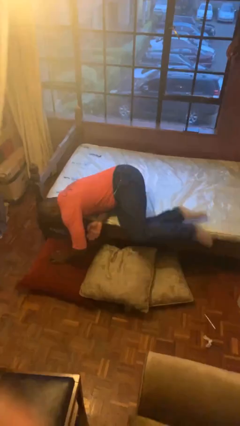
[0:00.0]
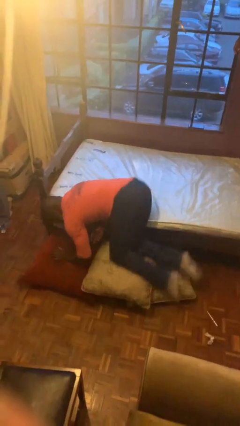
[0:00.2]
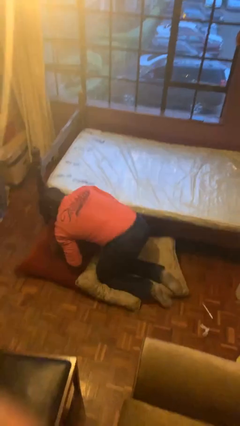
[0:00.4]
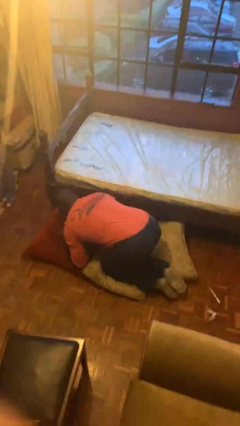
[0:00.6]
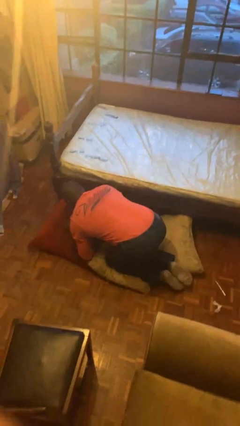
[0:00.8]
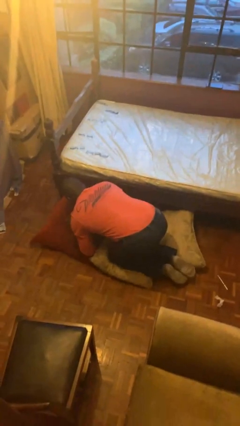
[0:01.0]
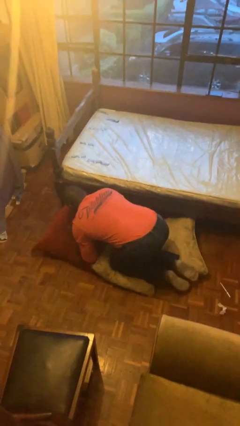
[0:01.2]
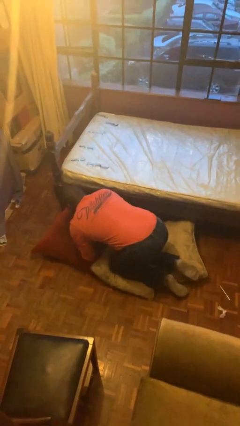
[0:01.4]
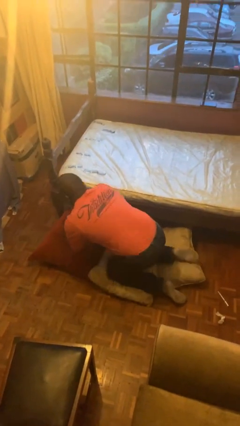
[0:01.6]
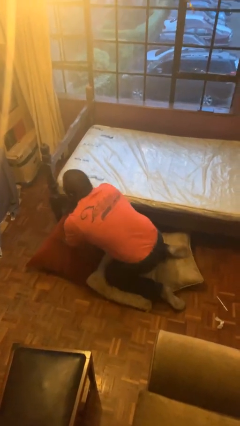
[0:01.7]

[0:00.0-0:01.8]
person falls from bed

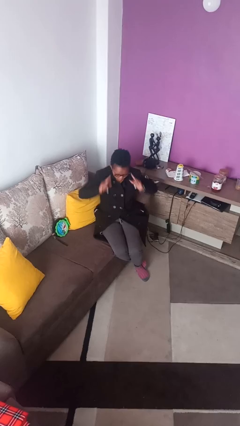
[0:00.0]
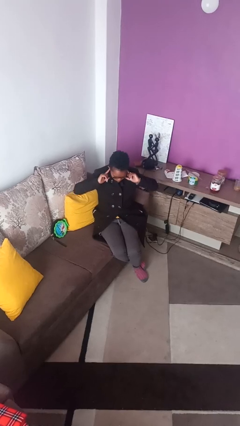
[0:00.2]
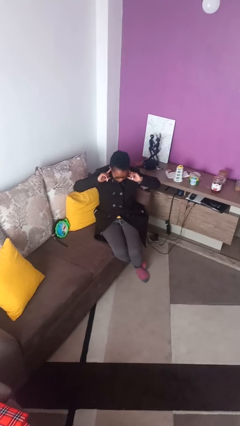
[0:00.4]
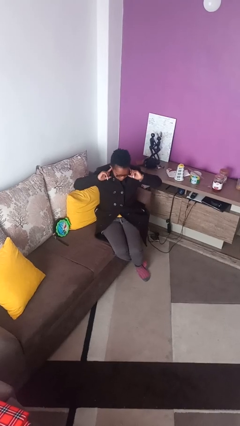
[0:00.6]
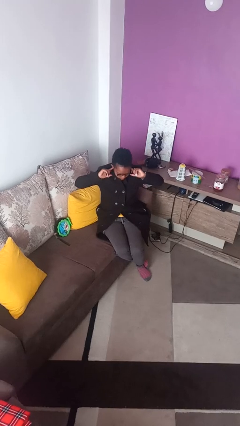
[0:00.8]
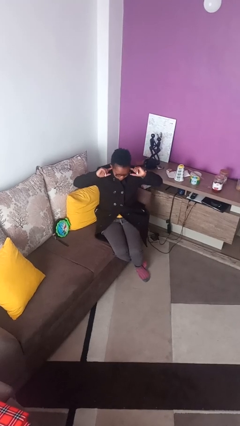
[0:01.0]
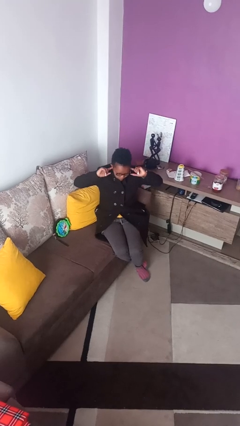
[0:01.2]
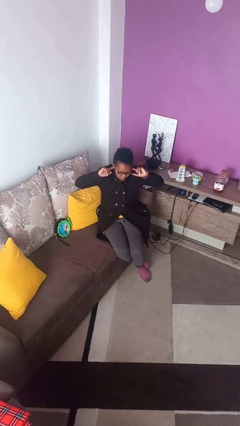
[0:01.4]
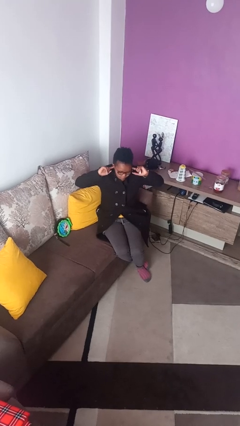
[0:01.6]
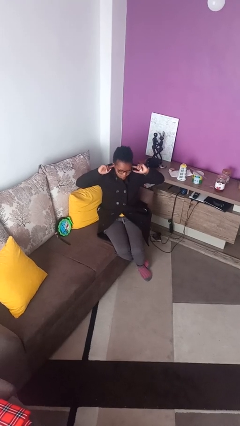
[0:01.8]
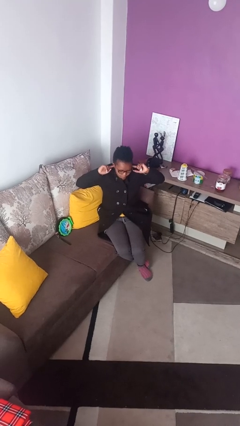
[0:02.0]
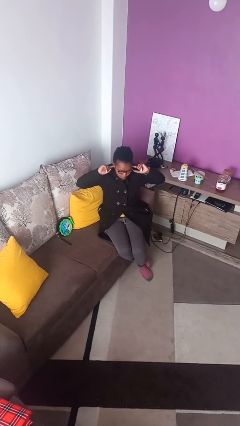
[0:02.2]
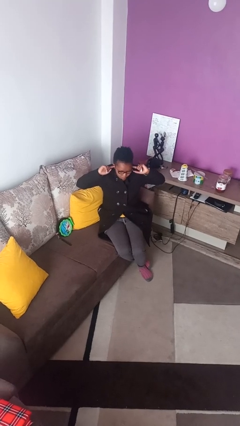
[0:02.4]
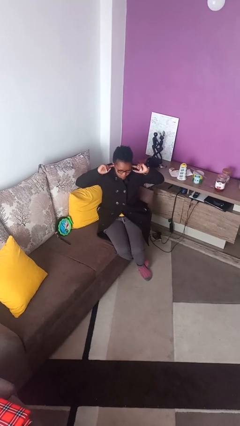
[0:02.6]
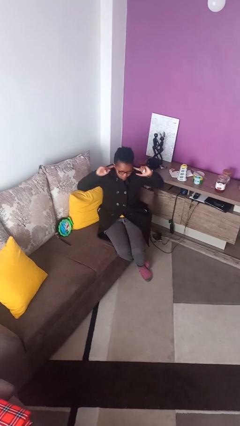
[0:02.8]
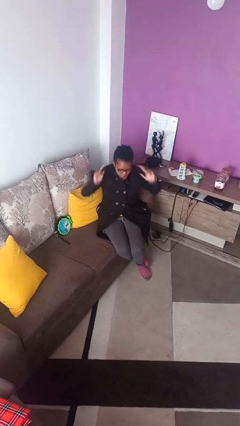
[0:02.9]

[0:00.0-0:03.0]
person puts fingers in ear

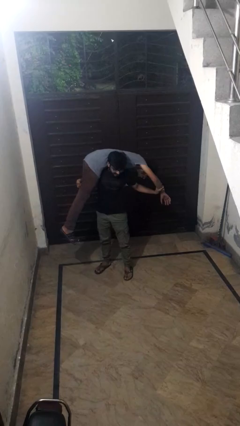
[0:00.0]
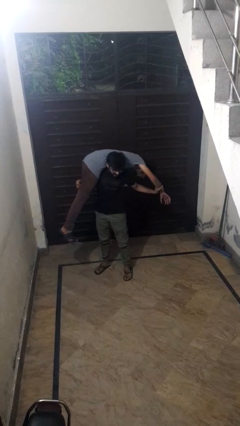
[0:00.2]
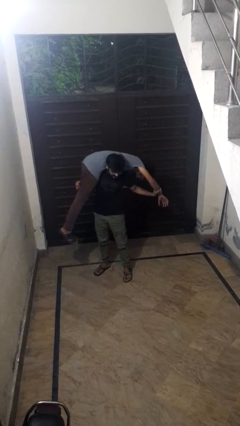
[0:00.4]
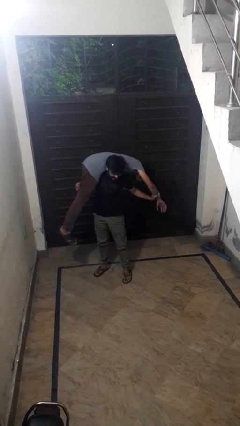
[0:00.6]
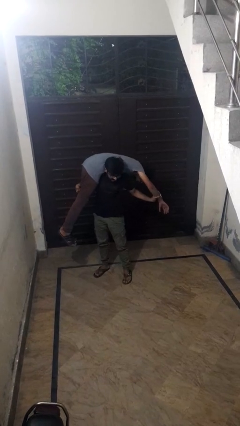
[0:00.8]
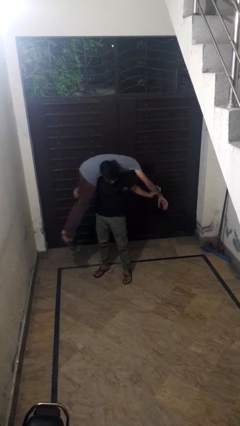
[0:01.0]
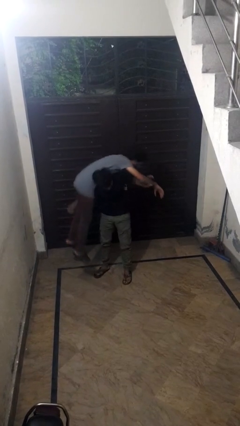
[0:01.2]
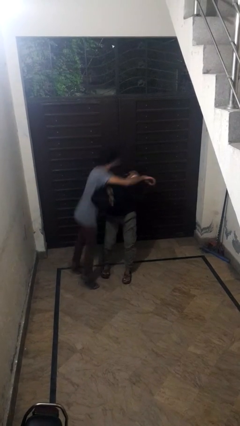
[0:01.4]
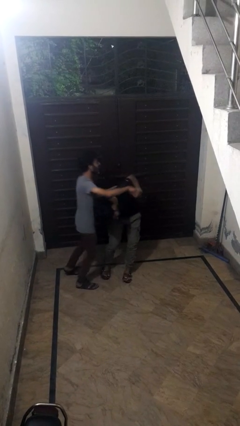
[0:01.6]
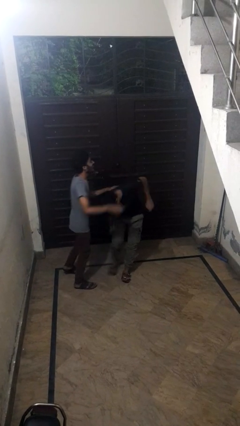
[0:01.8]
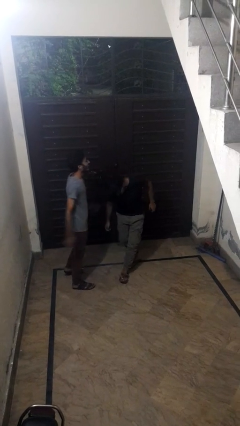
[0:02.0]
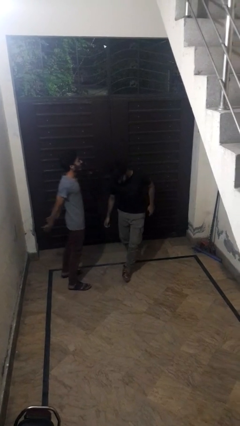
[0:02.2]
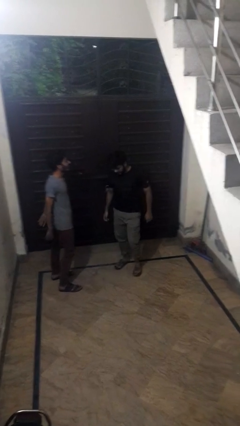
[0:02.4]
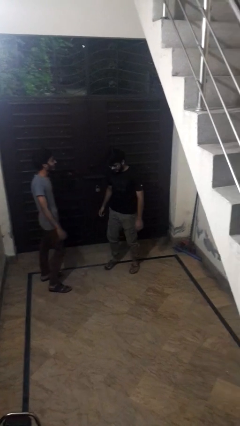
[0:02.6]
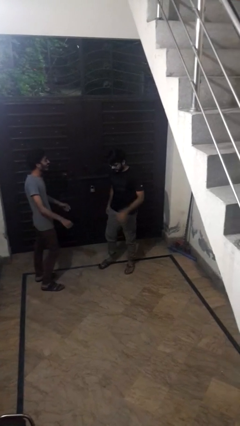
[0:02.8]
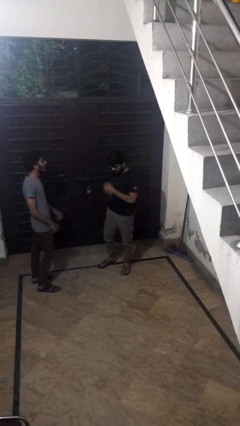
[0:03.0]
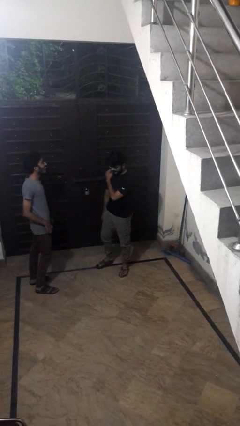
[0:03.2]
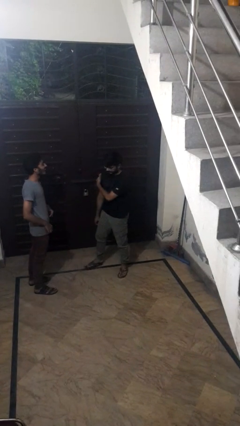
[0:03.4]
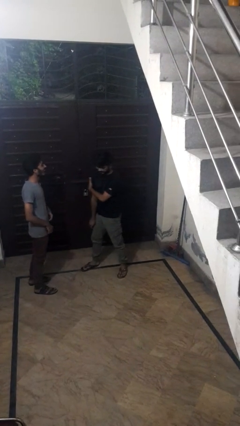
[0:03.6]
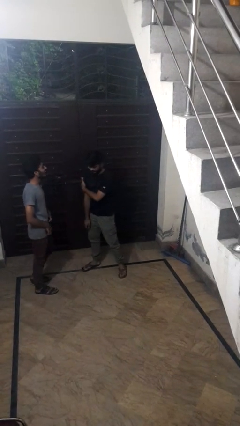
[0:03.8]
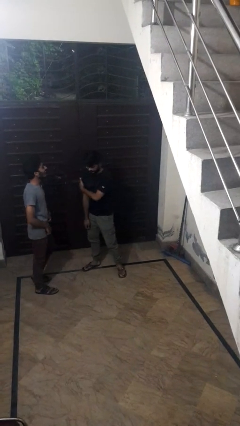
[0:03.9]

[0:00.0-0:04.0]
person puts down person

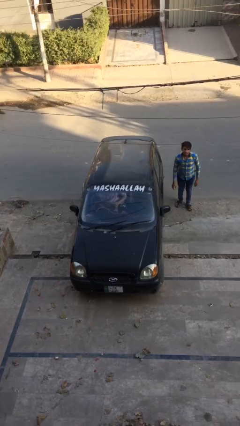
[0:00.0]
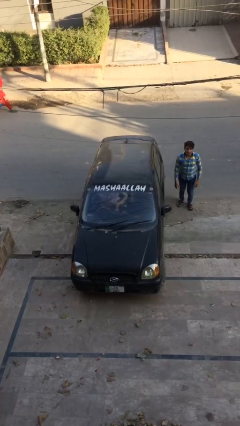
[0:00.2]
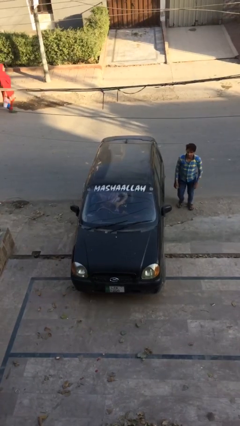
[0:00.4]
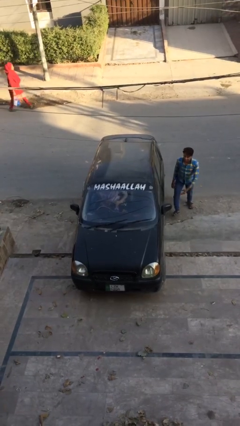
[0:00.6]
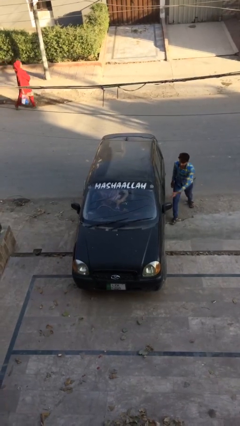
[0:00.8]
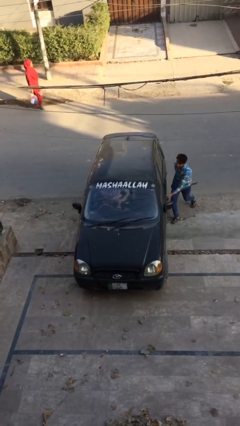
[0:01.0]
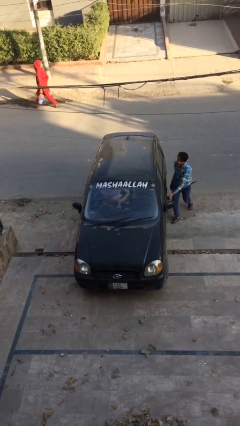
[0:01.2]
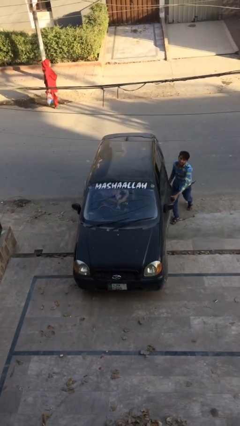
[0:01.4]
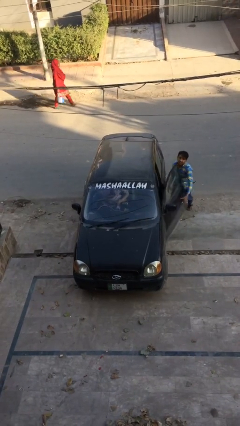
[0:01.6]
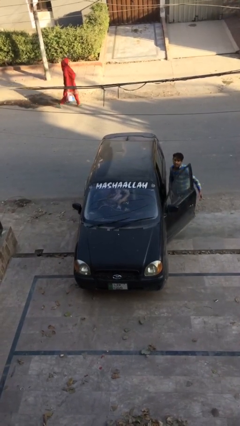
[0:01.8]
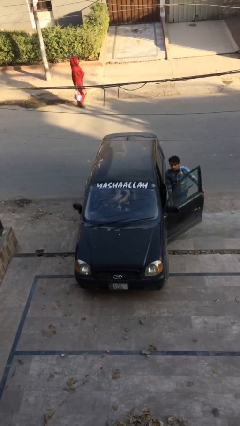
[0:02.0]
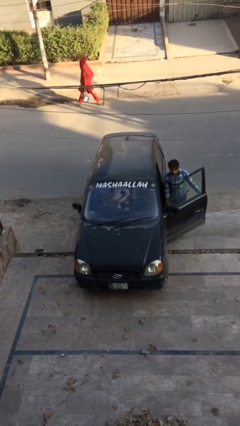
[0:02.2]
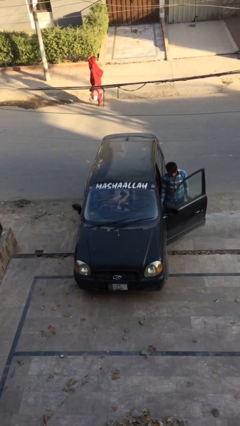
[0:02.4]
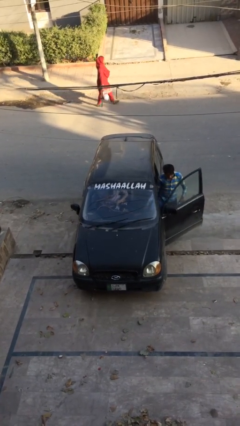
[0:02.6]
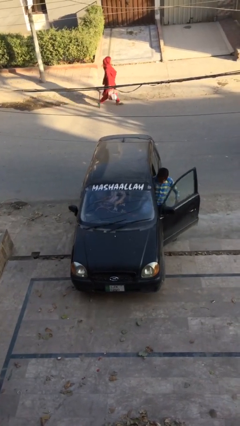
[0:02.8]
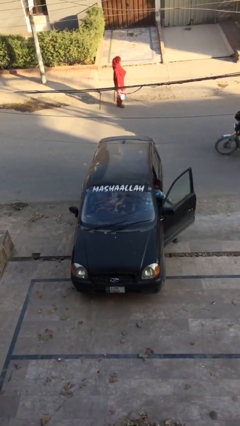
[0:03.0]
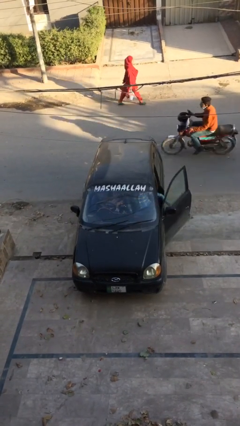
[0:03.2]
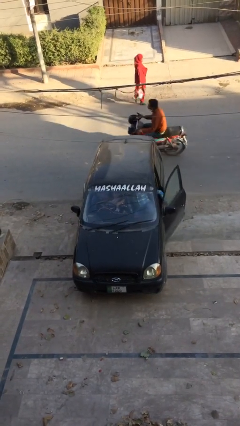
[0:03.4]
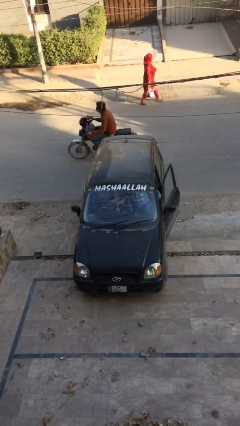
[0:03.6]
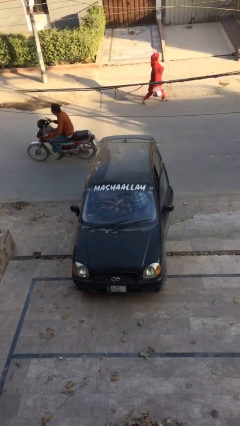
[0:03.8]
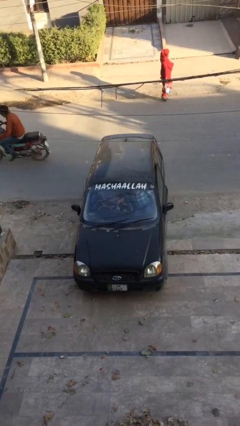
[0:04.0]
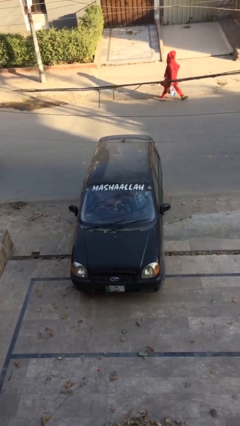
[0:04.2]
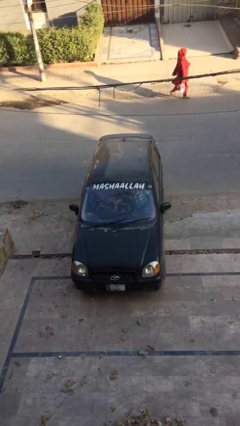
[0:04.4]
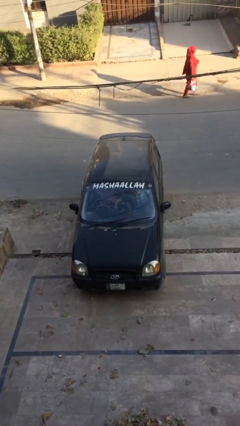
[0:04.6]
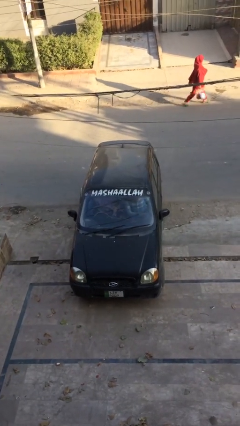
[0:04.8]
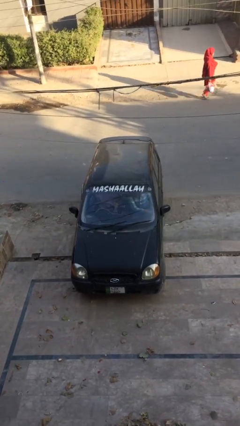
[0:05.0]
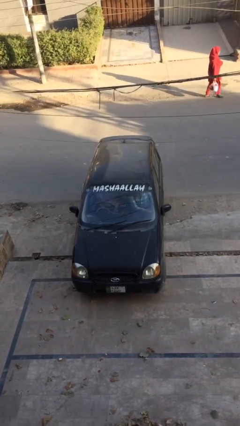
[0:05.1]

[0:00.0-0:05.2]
car picks up person

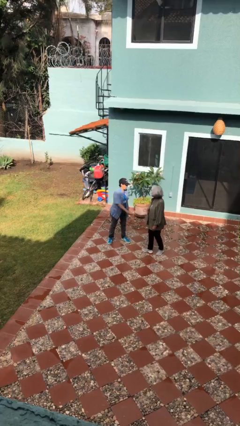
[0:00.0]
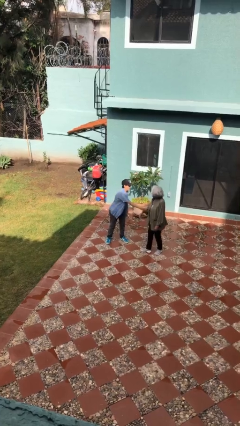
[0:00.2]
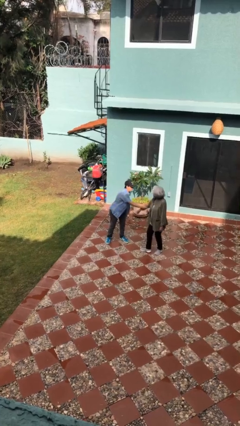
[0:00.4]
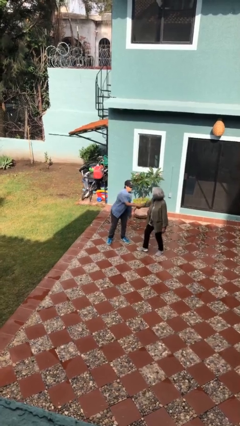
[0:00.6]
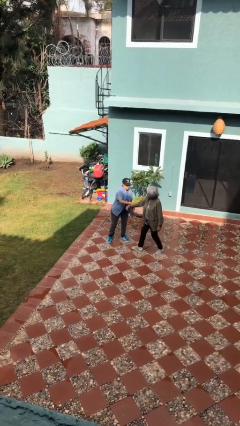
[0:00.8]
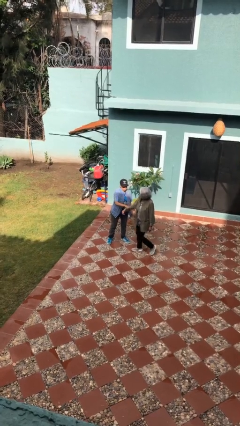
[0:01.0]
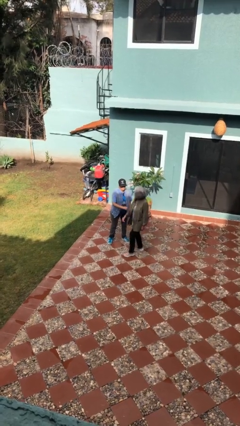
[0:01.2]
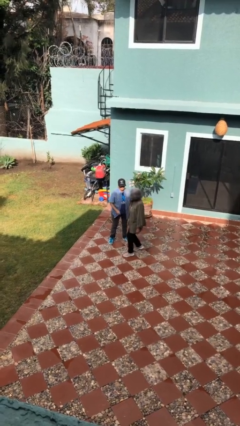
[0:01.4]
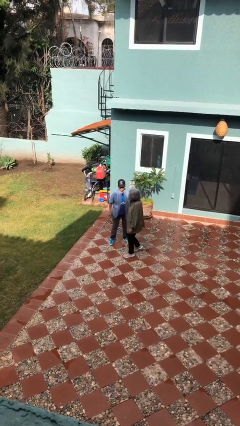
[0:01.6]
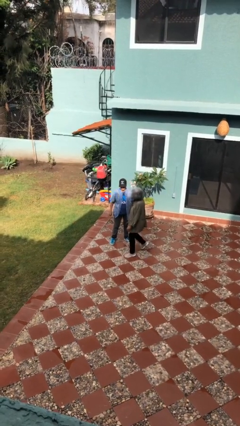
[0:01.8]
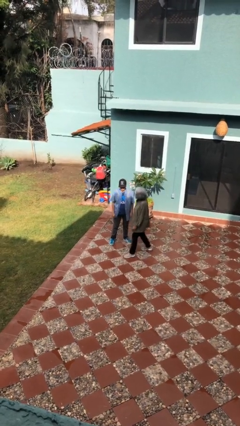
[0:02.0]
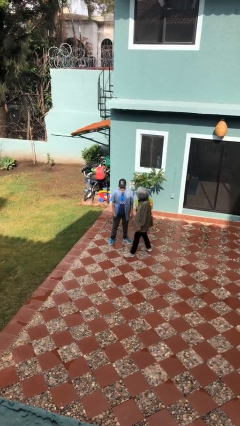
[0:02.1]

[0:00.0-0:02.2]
person grabs person by forearm

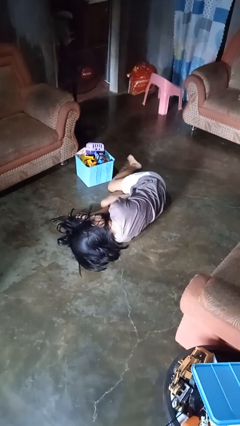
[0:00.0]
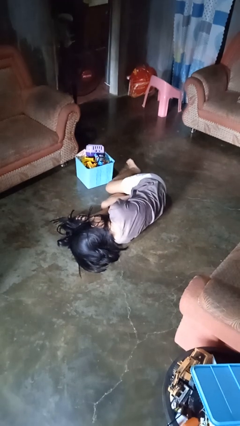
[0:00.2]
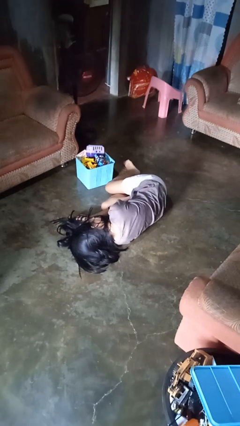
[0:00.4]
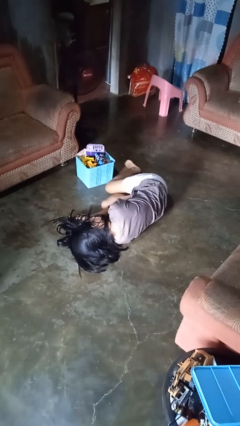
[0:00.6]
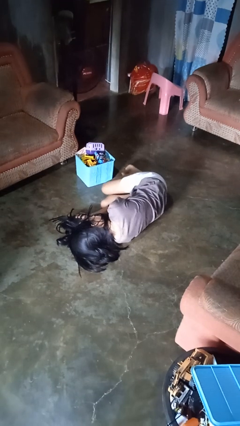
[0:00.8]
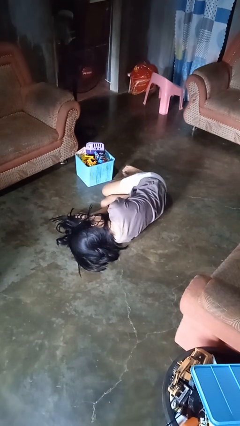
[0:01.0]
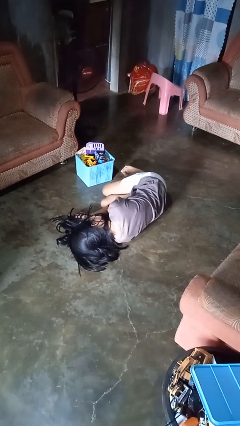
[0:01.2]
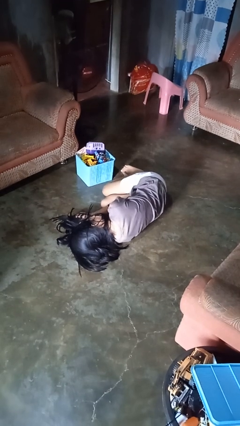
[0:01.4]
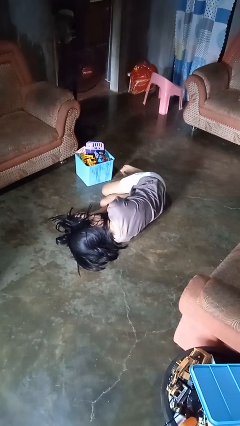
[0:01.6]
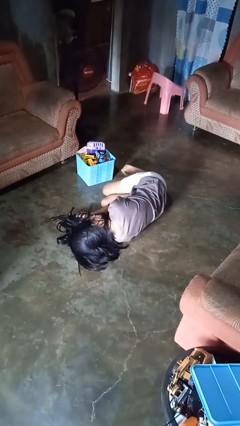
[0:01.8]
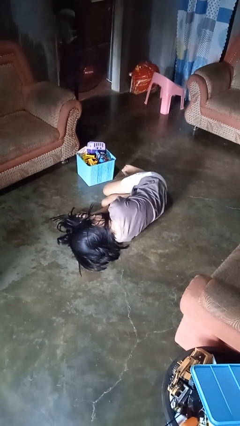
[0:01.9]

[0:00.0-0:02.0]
person lies down on floor
